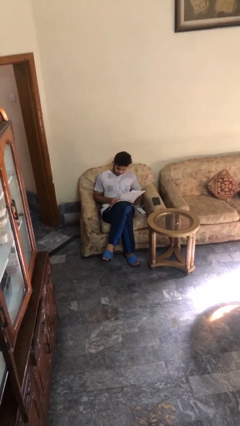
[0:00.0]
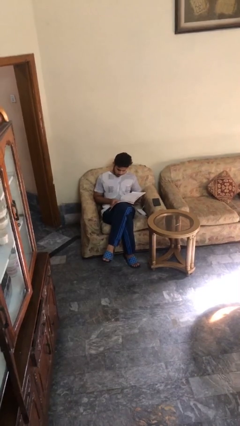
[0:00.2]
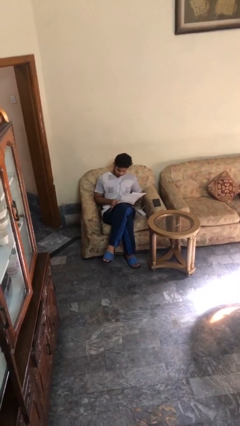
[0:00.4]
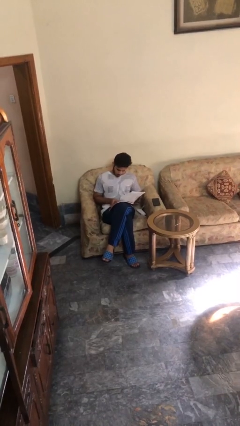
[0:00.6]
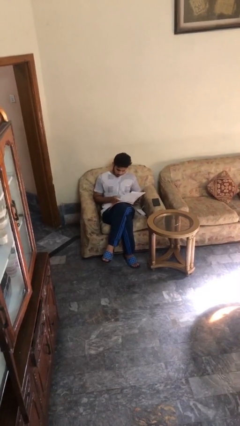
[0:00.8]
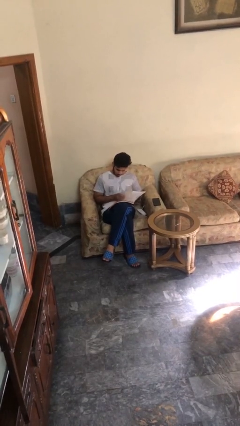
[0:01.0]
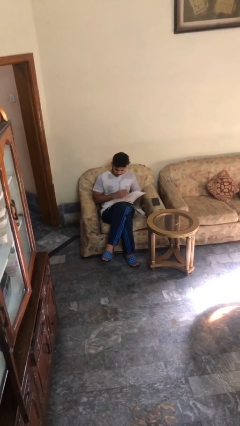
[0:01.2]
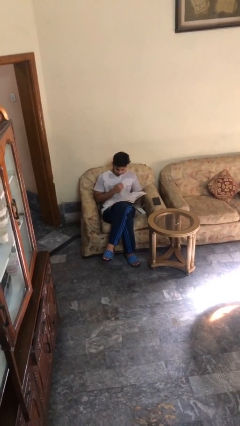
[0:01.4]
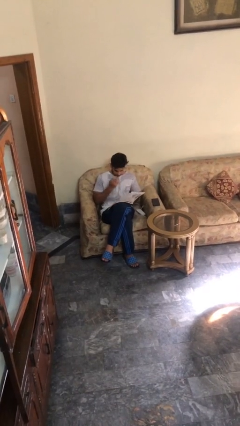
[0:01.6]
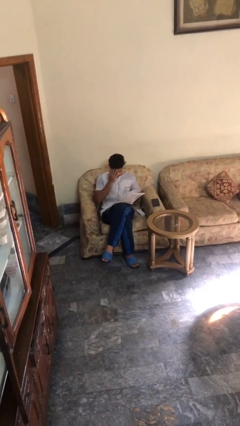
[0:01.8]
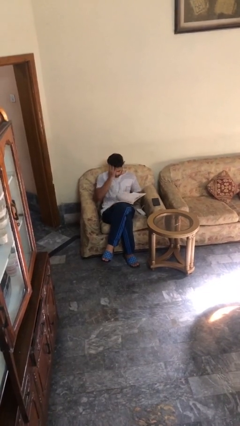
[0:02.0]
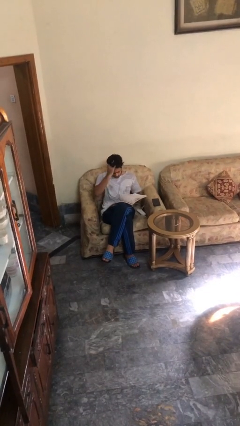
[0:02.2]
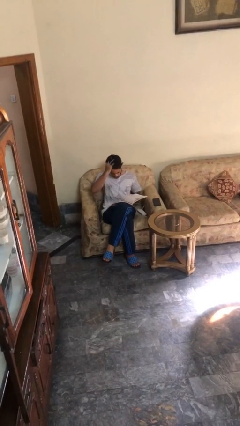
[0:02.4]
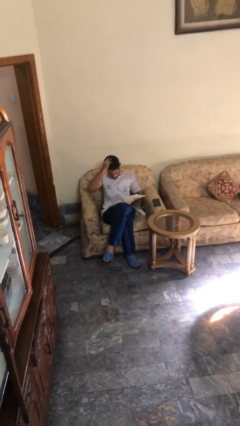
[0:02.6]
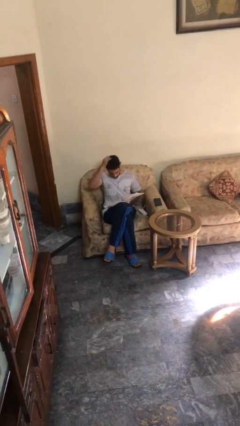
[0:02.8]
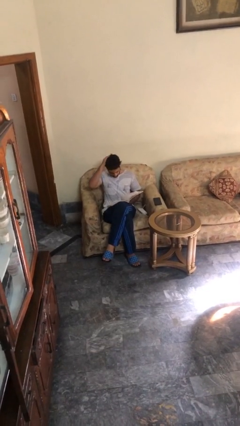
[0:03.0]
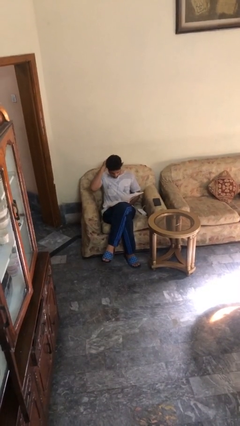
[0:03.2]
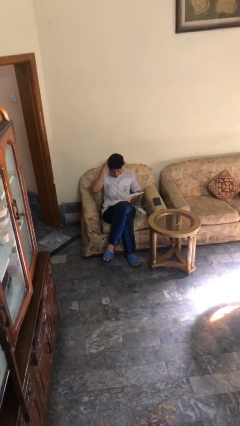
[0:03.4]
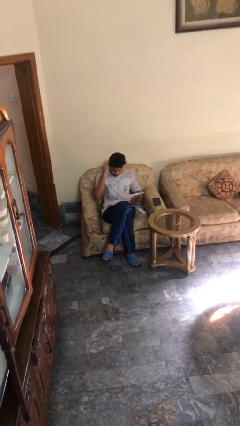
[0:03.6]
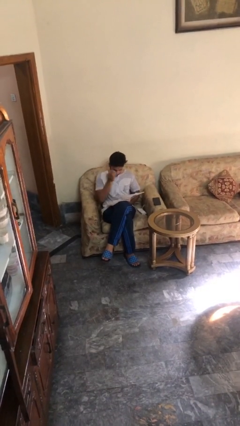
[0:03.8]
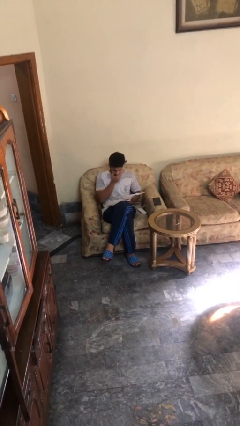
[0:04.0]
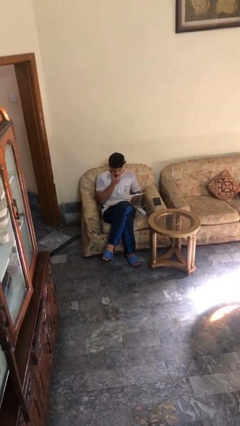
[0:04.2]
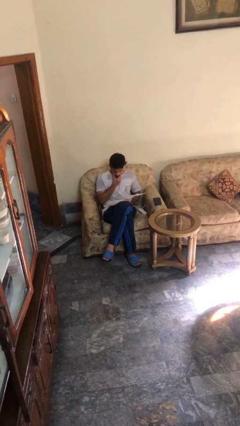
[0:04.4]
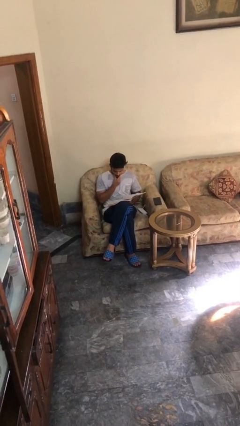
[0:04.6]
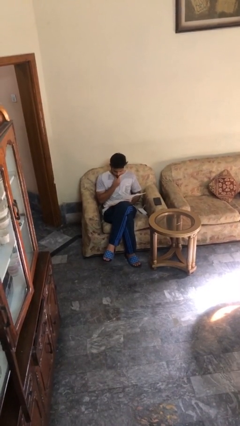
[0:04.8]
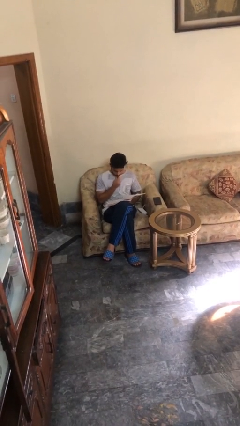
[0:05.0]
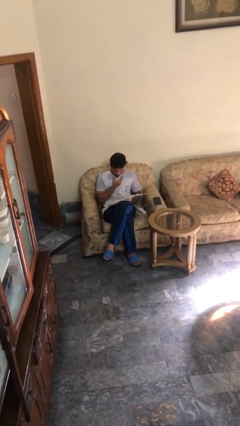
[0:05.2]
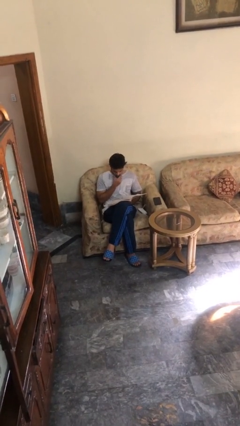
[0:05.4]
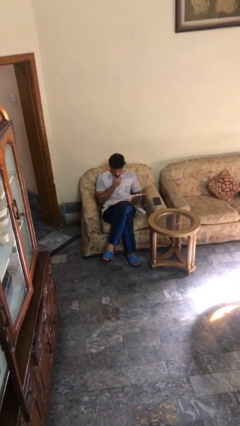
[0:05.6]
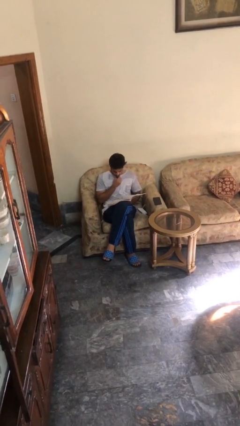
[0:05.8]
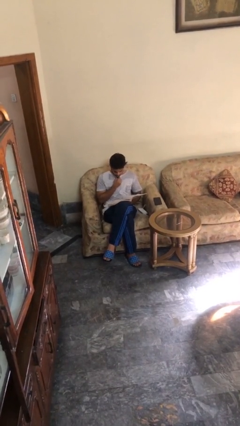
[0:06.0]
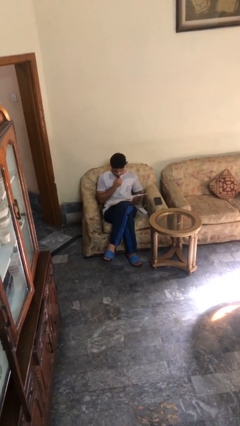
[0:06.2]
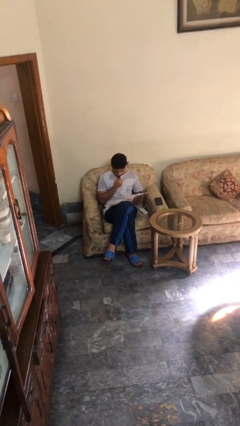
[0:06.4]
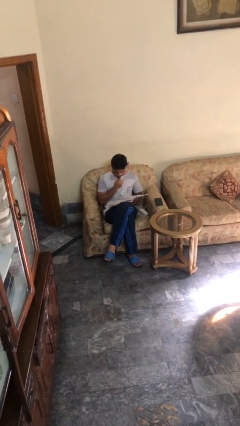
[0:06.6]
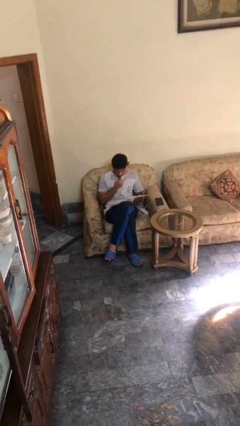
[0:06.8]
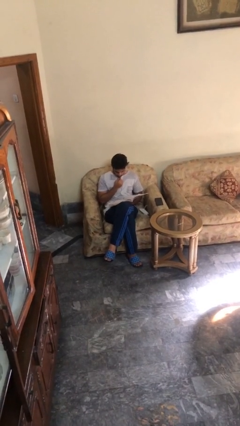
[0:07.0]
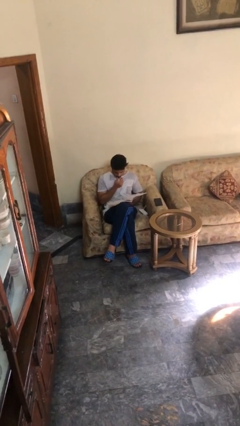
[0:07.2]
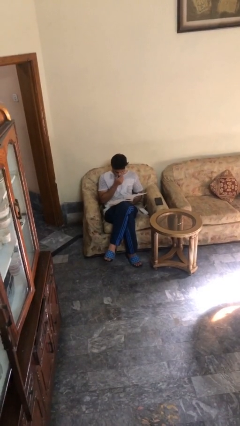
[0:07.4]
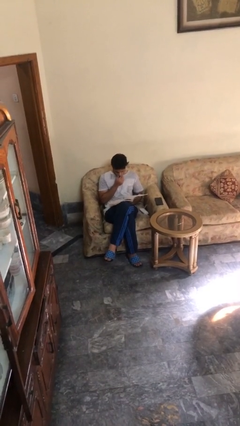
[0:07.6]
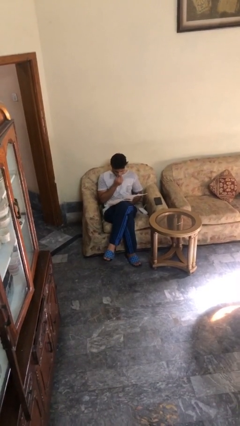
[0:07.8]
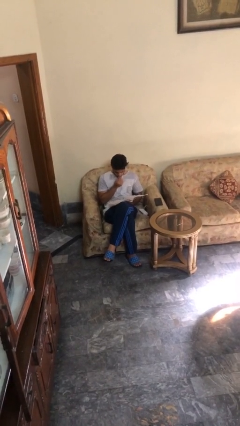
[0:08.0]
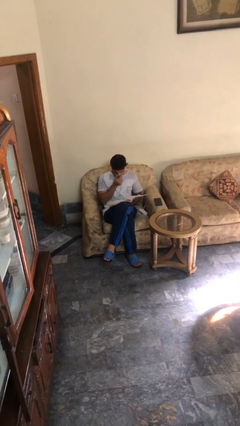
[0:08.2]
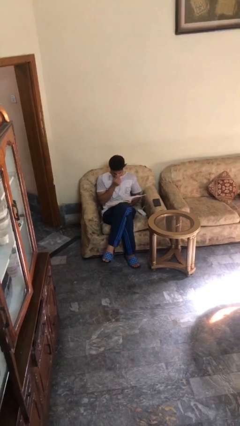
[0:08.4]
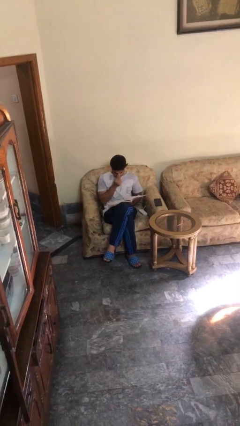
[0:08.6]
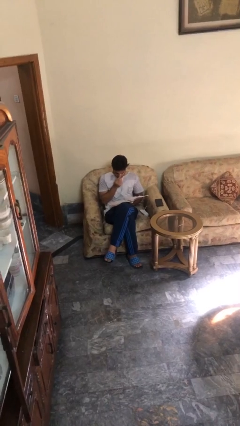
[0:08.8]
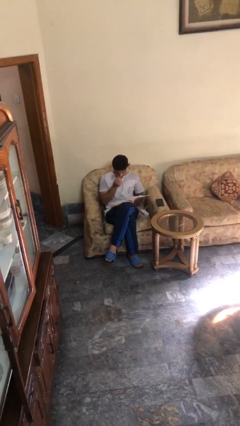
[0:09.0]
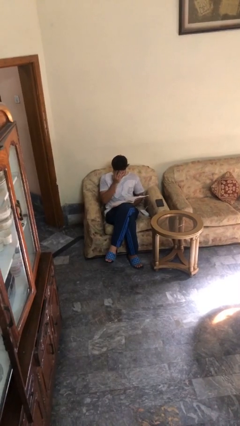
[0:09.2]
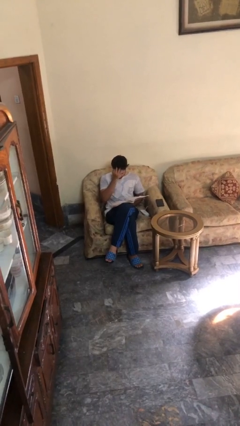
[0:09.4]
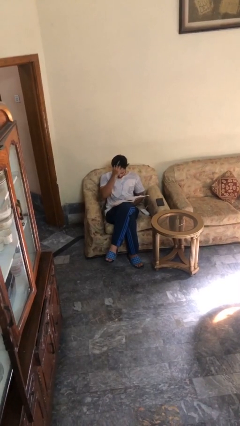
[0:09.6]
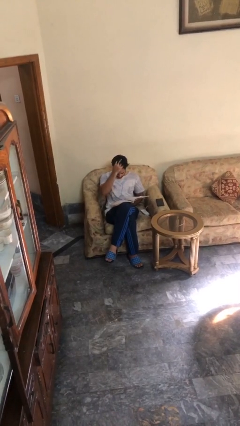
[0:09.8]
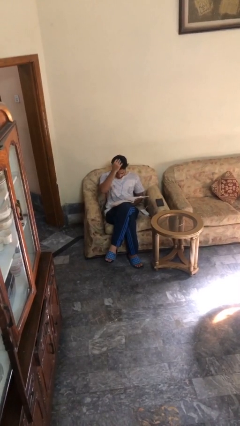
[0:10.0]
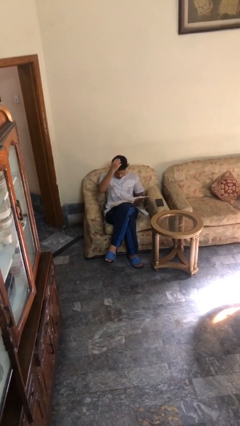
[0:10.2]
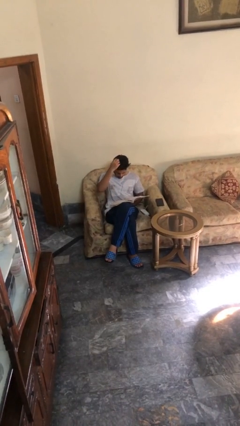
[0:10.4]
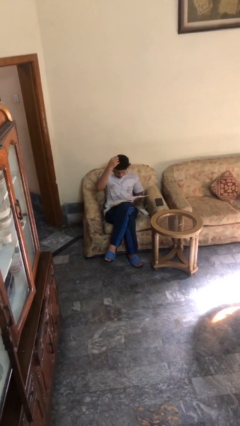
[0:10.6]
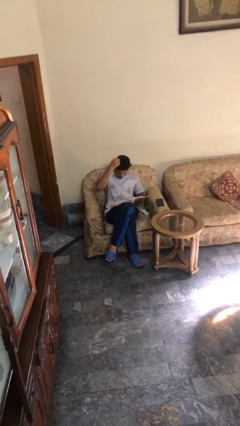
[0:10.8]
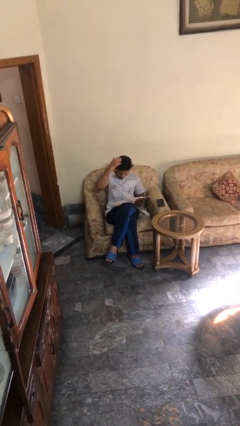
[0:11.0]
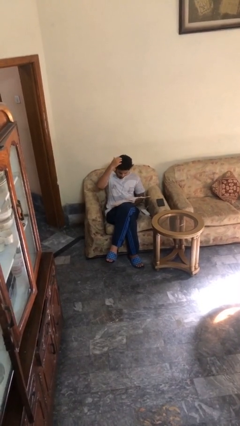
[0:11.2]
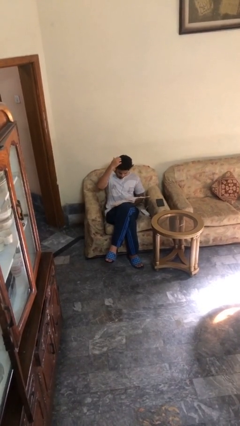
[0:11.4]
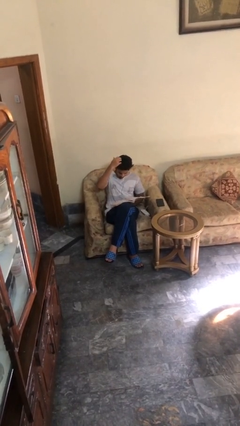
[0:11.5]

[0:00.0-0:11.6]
person reads document

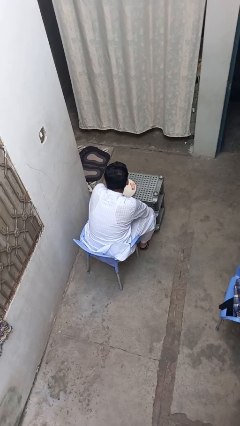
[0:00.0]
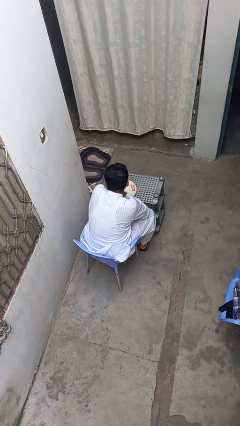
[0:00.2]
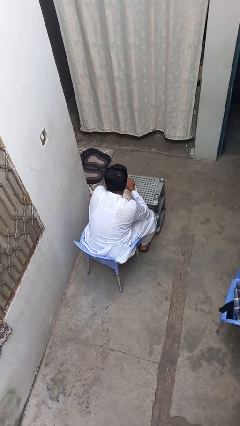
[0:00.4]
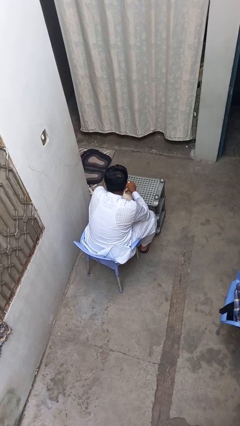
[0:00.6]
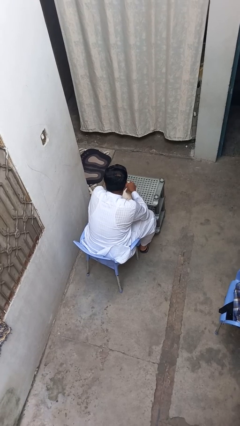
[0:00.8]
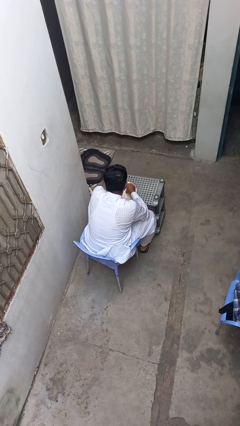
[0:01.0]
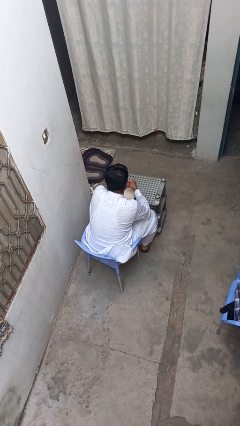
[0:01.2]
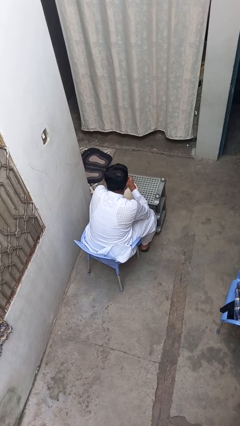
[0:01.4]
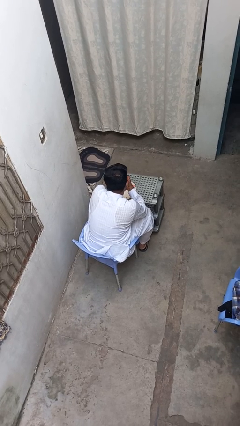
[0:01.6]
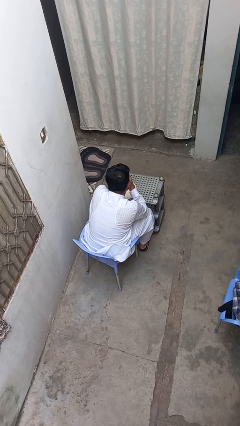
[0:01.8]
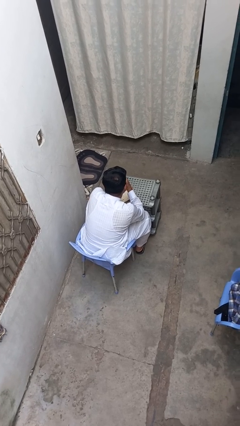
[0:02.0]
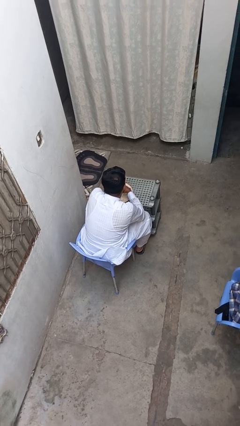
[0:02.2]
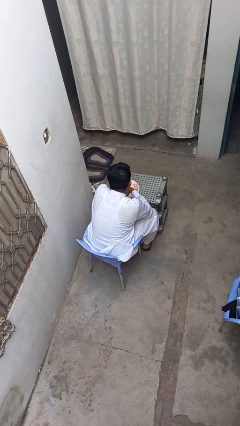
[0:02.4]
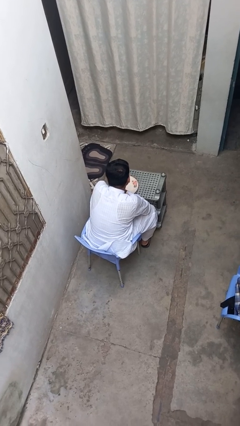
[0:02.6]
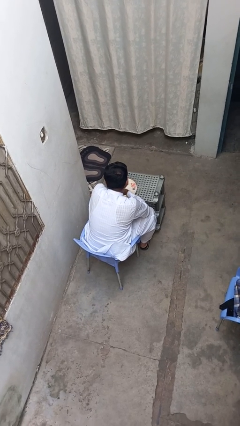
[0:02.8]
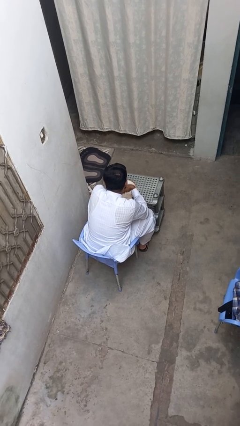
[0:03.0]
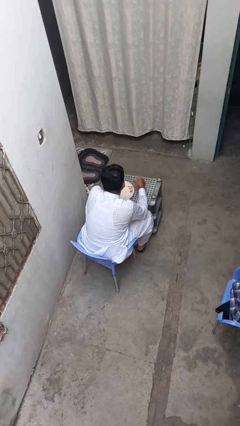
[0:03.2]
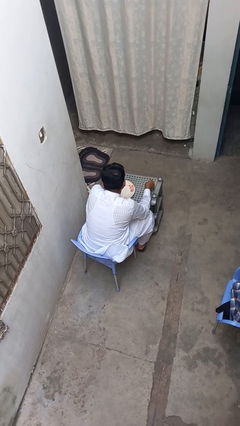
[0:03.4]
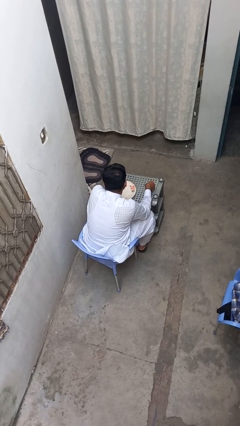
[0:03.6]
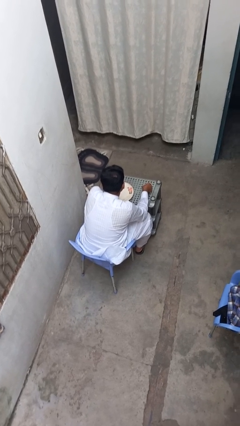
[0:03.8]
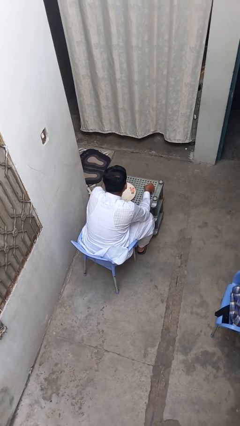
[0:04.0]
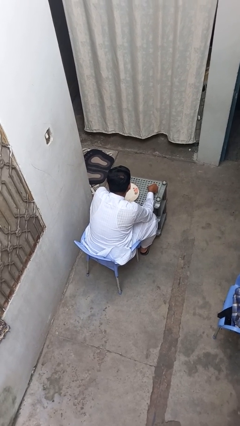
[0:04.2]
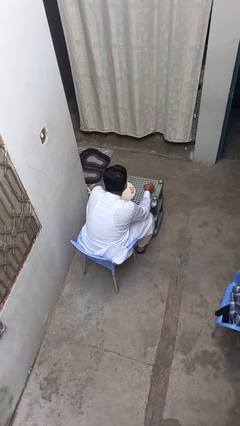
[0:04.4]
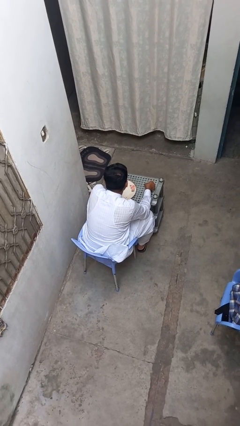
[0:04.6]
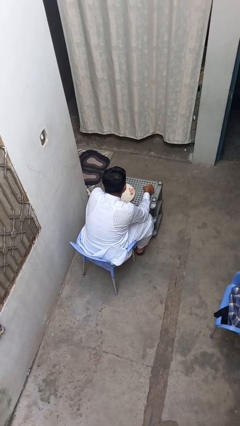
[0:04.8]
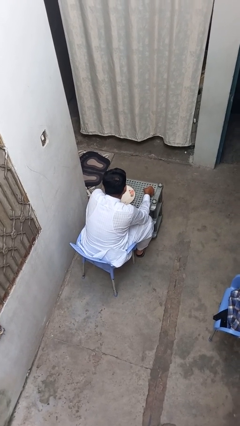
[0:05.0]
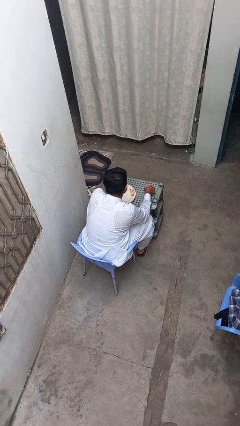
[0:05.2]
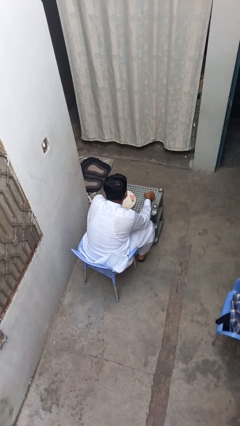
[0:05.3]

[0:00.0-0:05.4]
person eats with hands

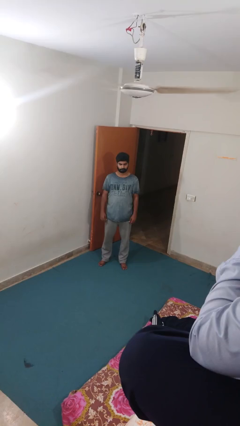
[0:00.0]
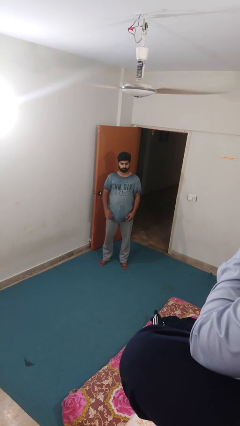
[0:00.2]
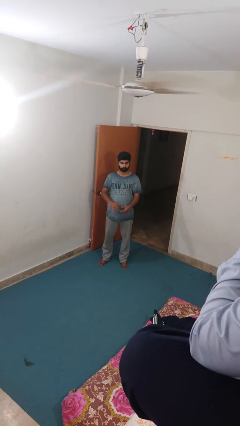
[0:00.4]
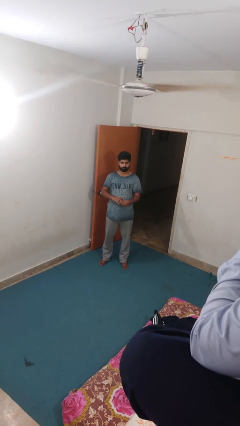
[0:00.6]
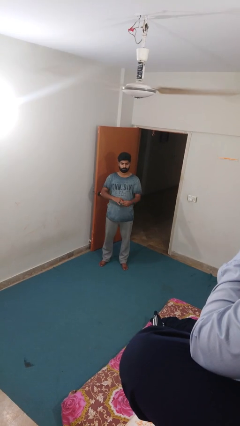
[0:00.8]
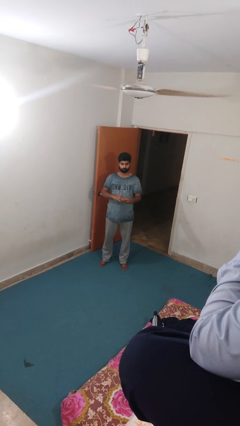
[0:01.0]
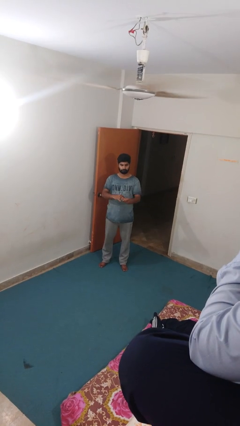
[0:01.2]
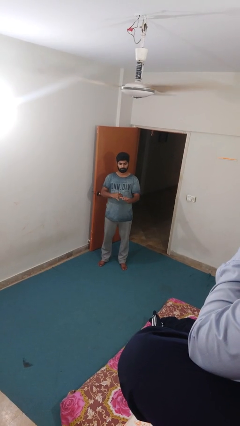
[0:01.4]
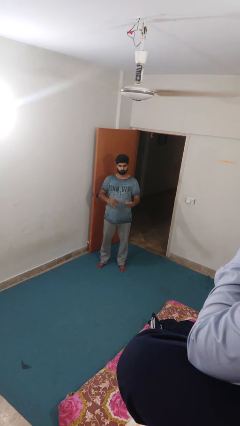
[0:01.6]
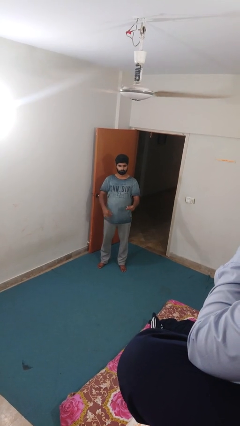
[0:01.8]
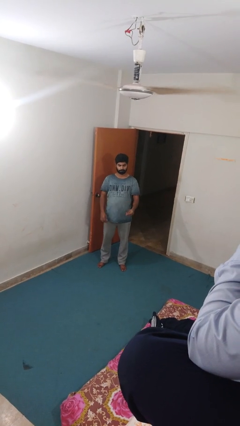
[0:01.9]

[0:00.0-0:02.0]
person takes off ring
